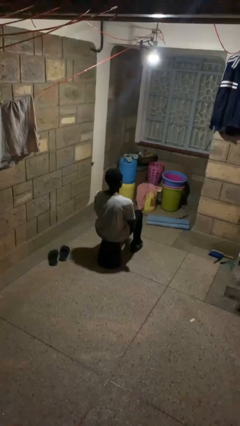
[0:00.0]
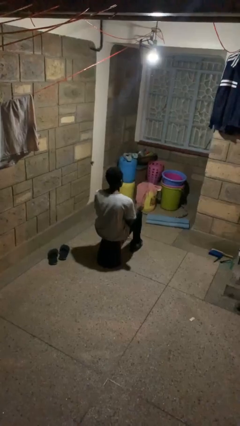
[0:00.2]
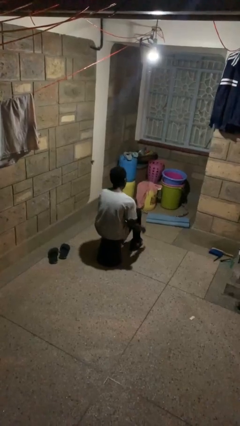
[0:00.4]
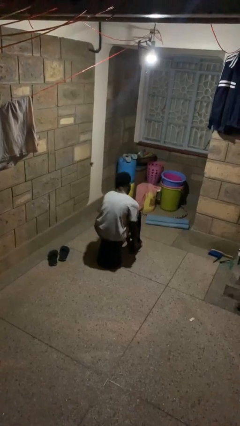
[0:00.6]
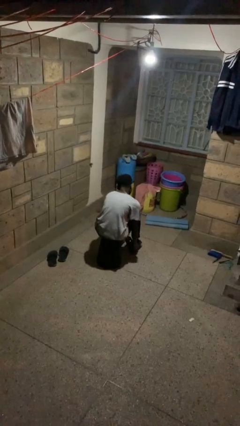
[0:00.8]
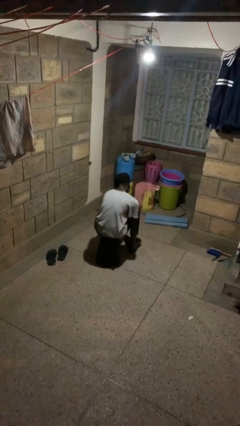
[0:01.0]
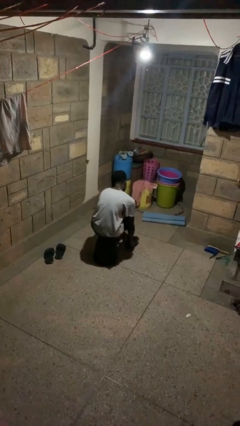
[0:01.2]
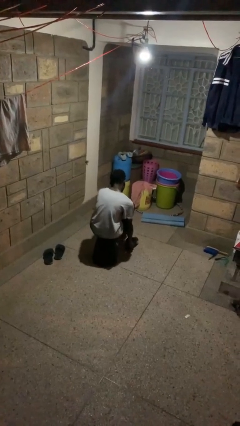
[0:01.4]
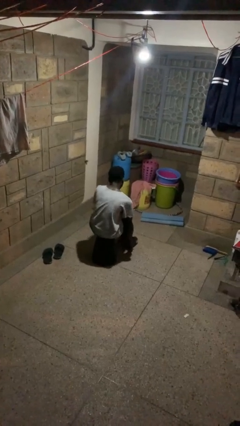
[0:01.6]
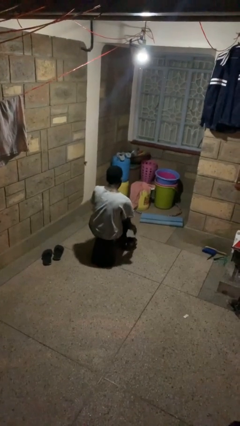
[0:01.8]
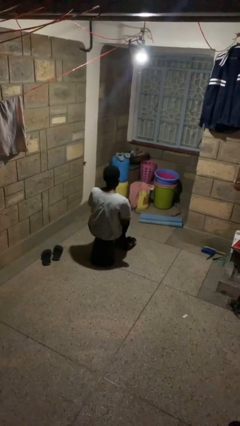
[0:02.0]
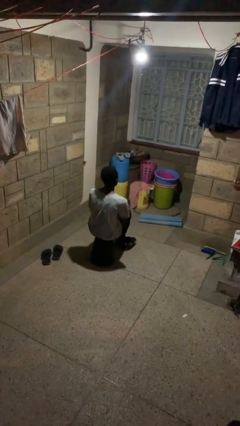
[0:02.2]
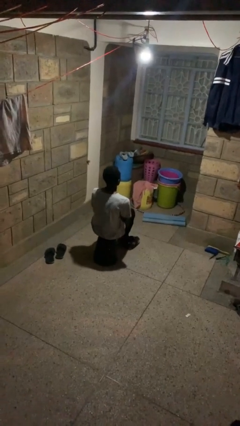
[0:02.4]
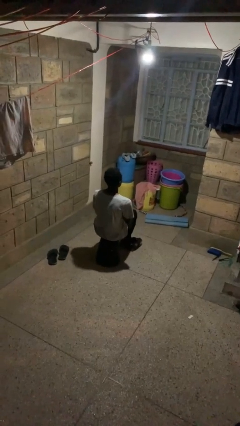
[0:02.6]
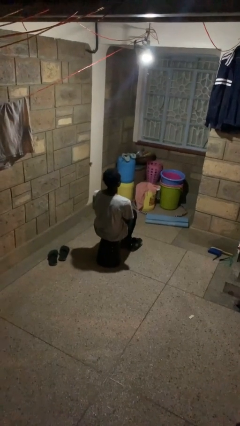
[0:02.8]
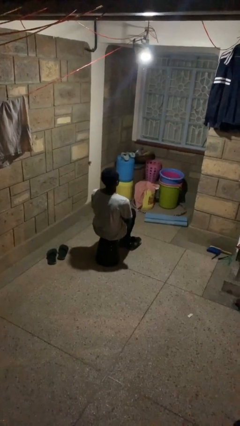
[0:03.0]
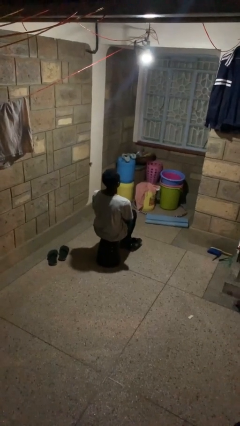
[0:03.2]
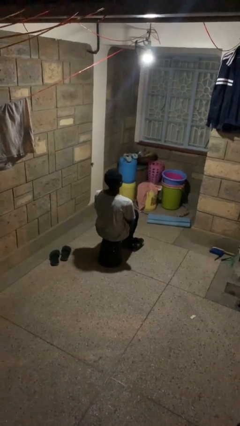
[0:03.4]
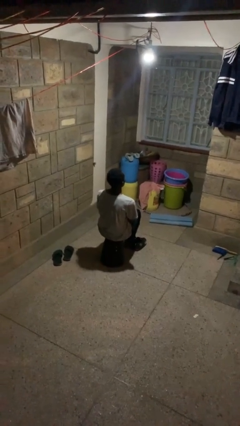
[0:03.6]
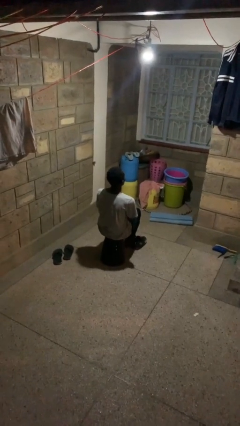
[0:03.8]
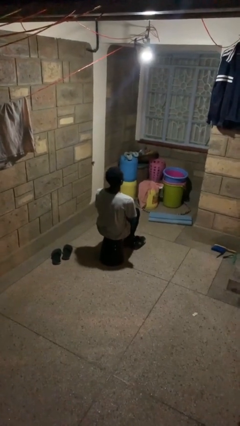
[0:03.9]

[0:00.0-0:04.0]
person takes off shoes

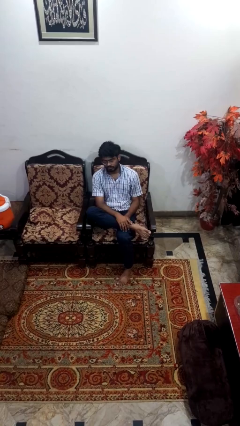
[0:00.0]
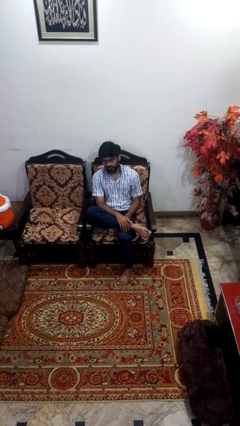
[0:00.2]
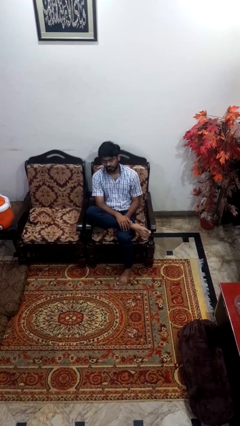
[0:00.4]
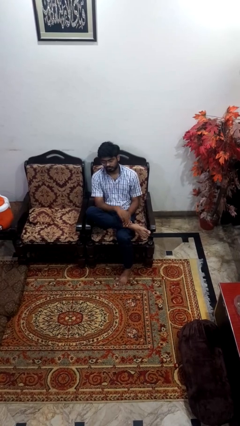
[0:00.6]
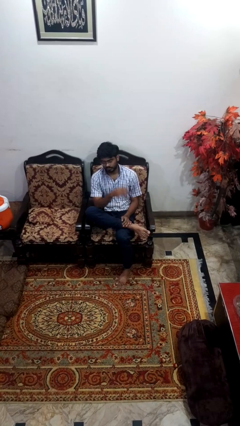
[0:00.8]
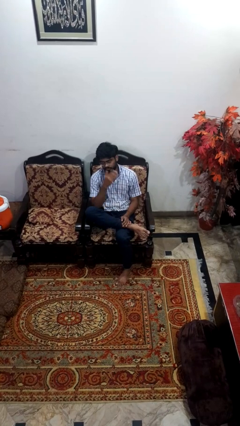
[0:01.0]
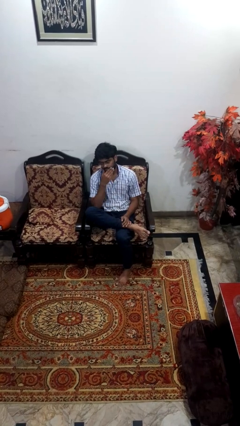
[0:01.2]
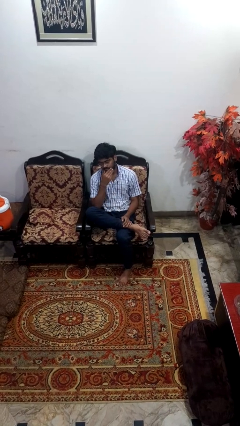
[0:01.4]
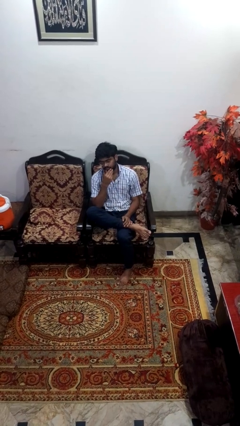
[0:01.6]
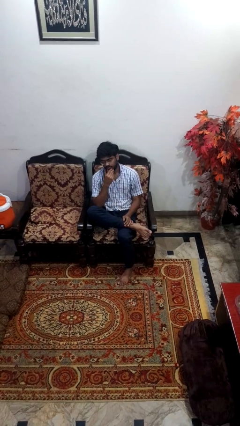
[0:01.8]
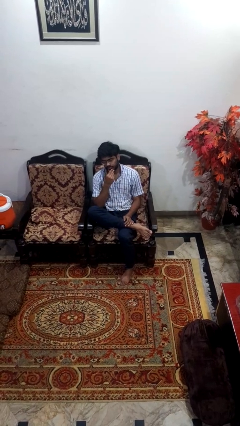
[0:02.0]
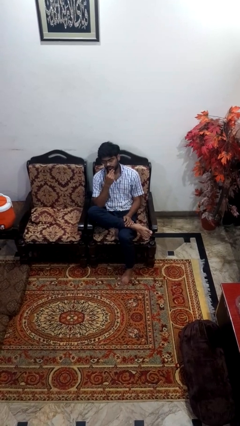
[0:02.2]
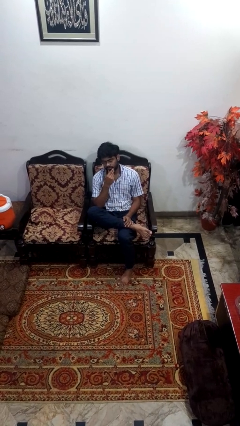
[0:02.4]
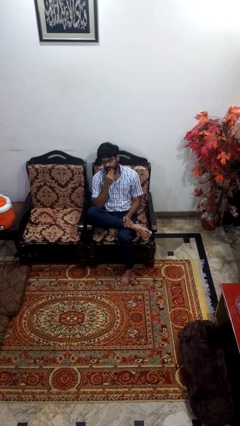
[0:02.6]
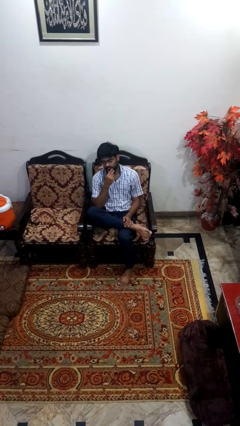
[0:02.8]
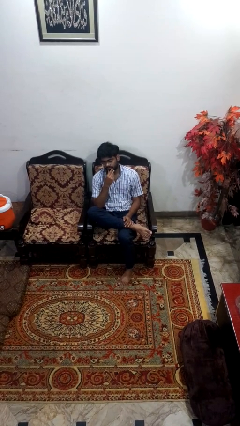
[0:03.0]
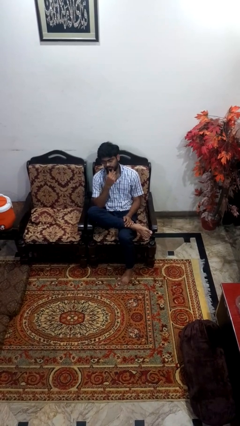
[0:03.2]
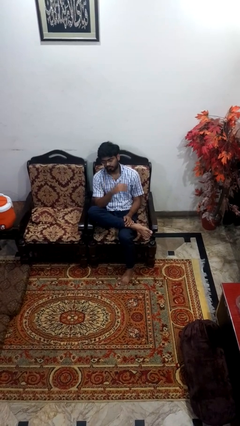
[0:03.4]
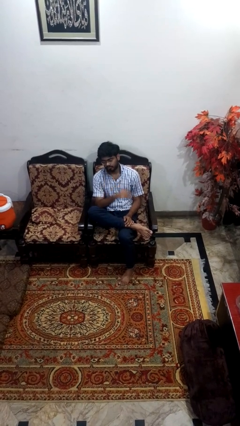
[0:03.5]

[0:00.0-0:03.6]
person strokes chin

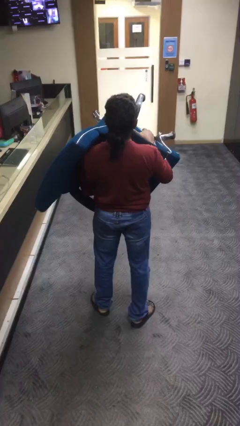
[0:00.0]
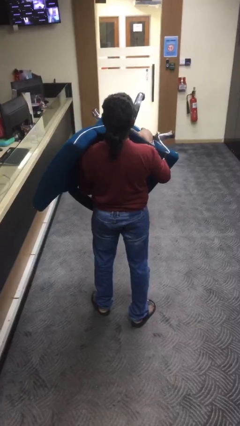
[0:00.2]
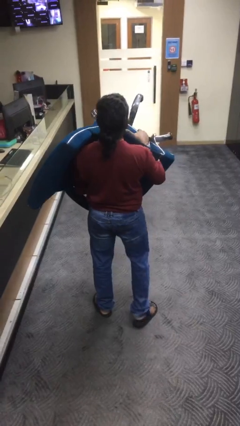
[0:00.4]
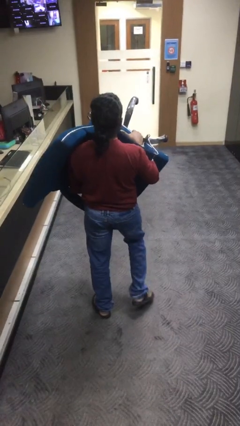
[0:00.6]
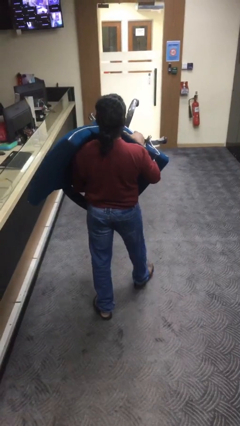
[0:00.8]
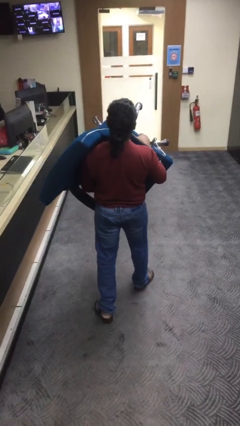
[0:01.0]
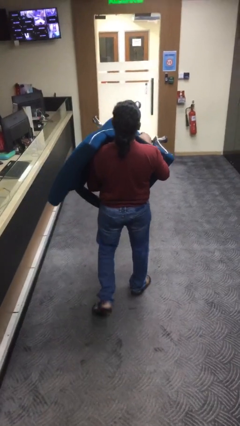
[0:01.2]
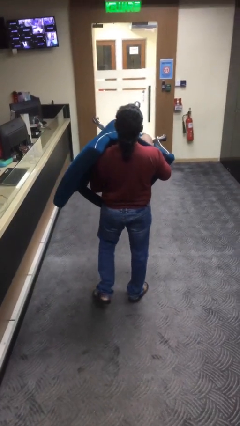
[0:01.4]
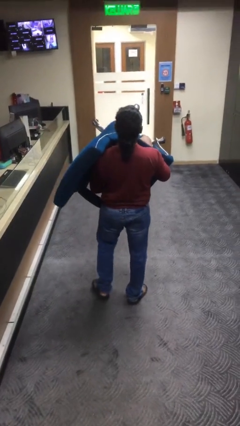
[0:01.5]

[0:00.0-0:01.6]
person carries furniture

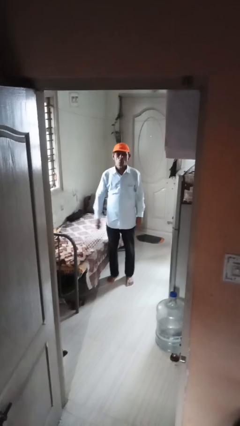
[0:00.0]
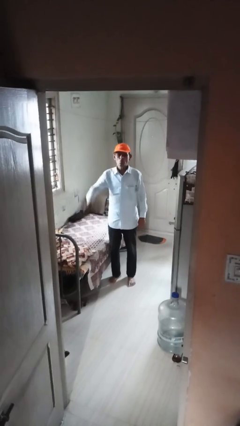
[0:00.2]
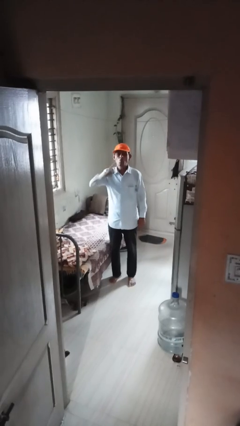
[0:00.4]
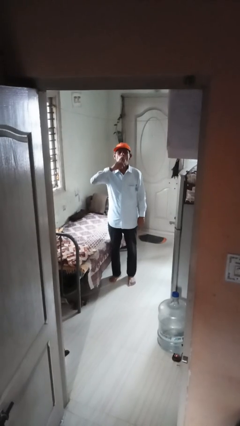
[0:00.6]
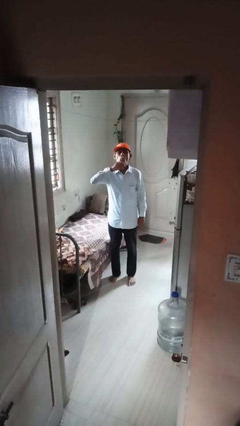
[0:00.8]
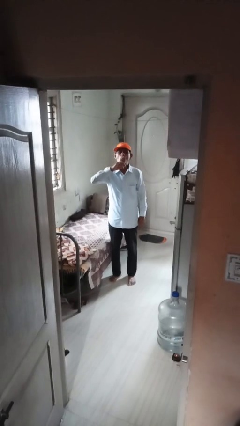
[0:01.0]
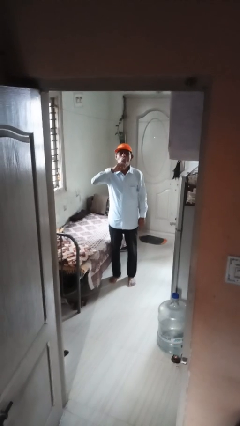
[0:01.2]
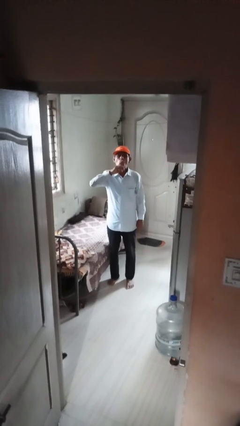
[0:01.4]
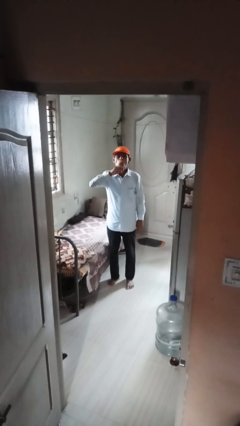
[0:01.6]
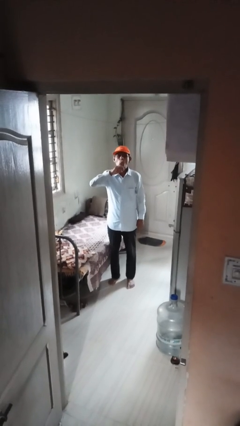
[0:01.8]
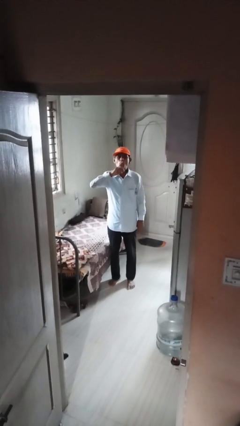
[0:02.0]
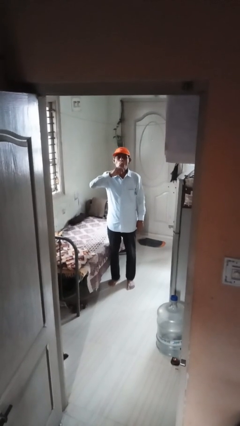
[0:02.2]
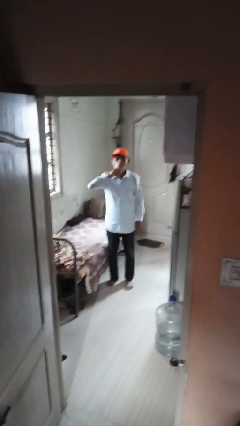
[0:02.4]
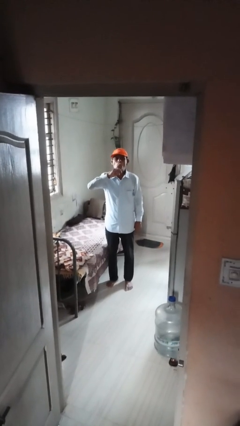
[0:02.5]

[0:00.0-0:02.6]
person gestures be quiet

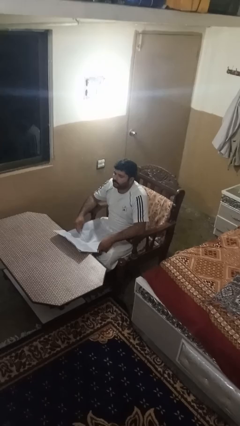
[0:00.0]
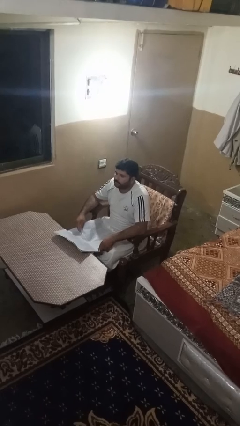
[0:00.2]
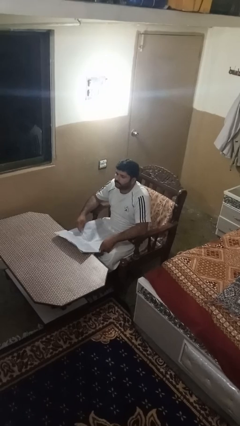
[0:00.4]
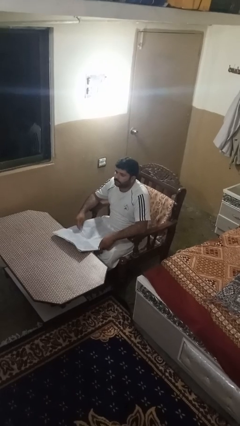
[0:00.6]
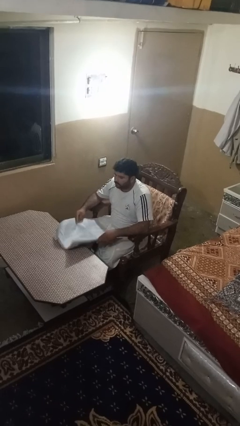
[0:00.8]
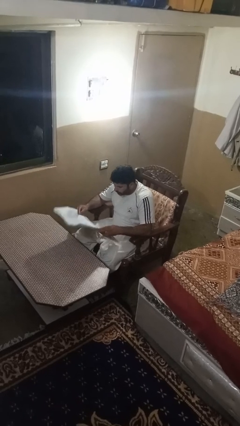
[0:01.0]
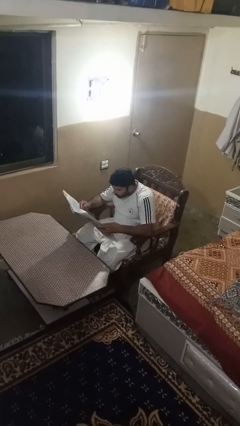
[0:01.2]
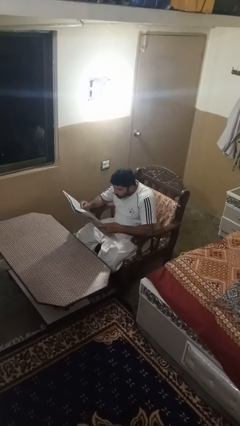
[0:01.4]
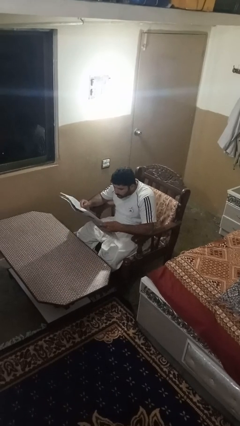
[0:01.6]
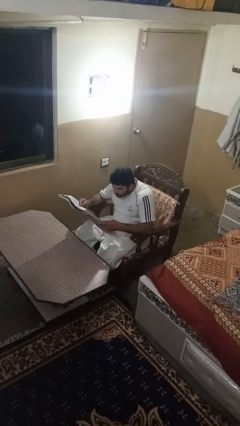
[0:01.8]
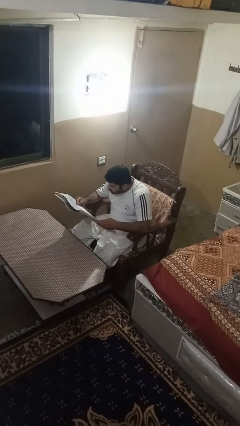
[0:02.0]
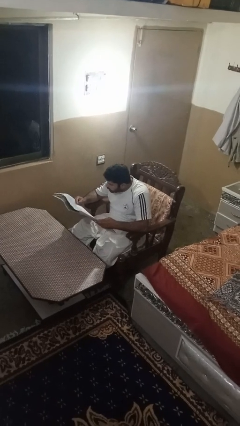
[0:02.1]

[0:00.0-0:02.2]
person reads newspaper

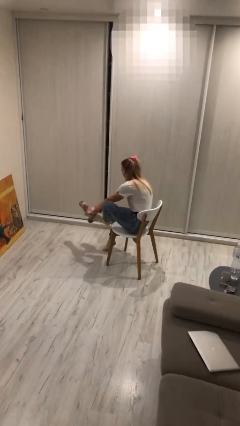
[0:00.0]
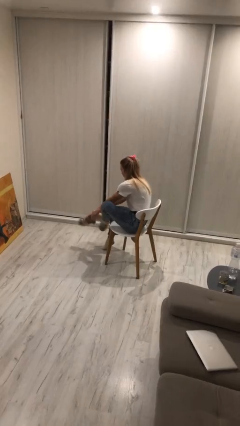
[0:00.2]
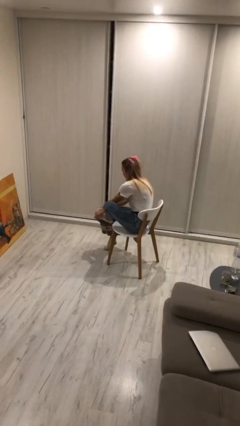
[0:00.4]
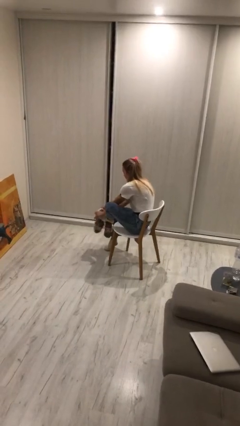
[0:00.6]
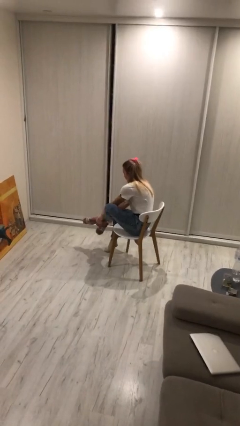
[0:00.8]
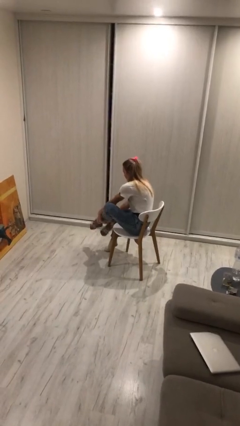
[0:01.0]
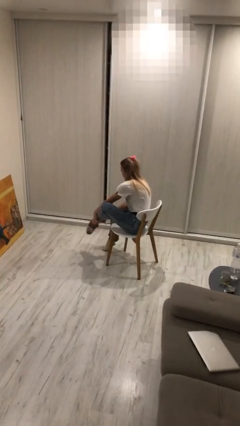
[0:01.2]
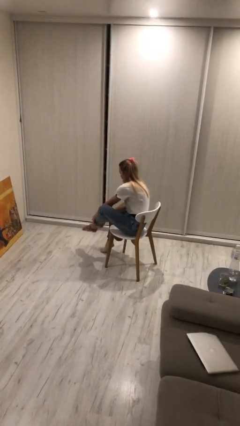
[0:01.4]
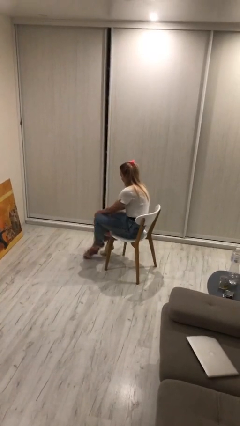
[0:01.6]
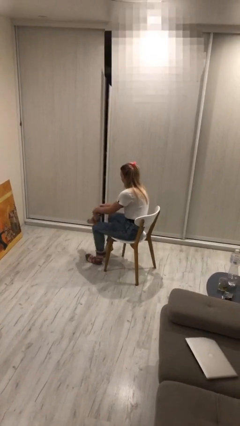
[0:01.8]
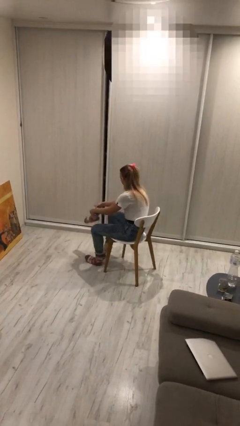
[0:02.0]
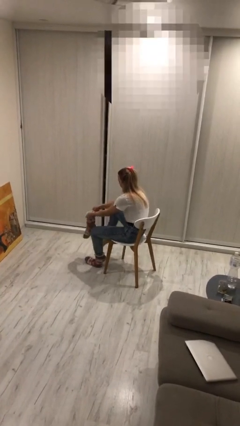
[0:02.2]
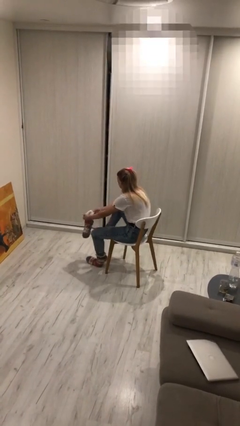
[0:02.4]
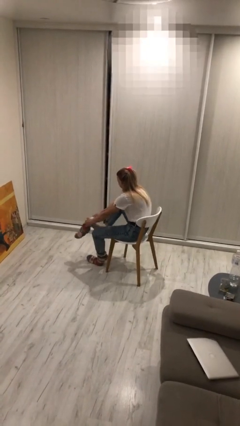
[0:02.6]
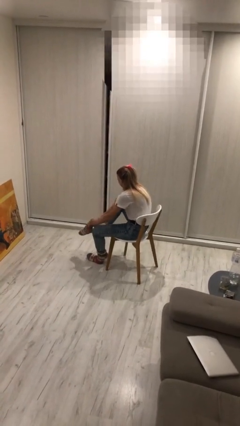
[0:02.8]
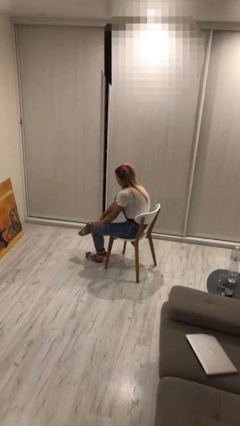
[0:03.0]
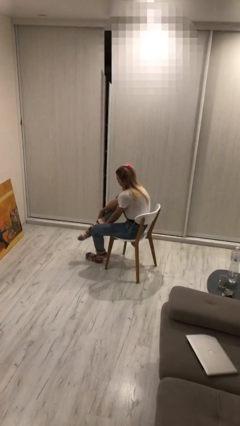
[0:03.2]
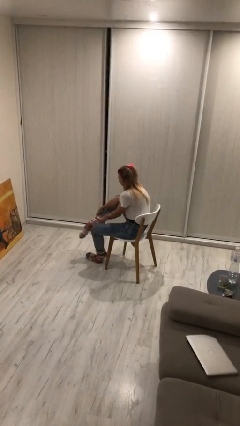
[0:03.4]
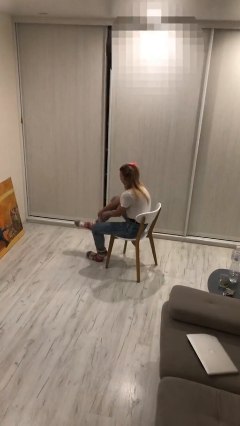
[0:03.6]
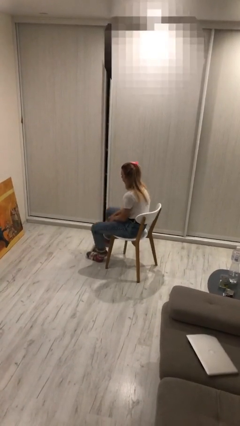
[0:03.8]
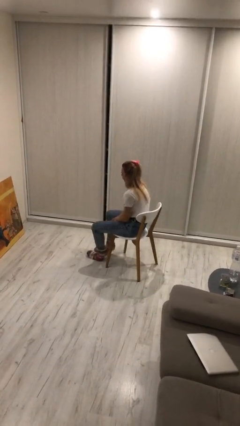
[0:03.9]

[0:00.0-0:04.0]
person puts on socks
